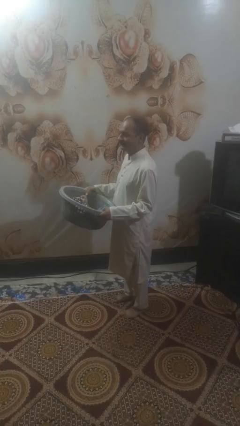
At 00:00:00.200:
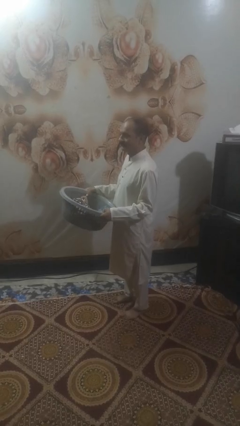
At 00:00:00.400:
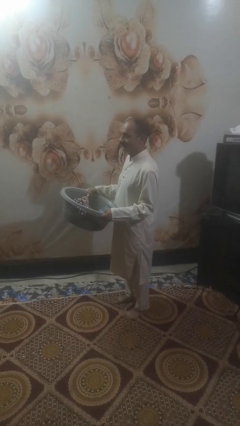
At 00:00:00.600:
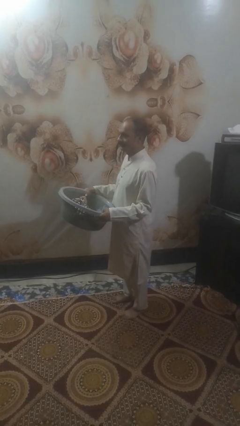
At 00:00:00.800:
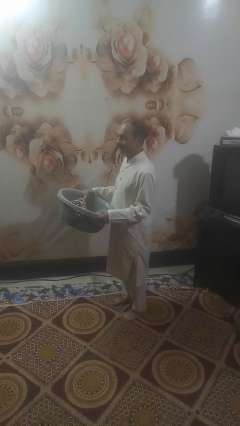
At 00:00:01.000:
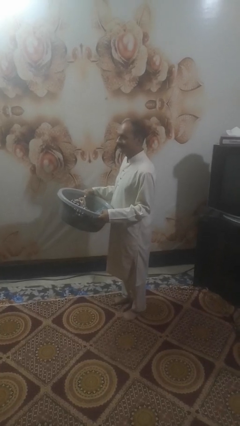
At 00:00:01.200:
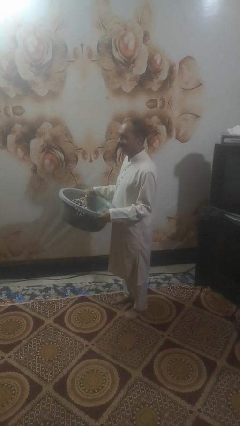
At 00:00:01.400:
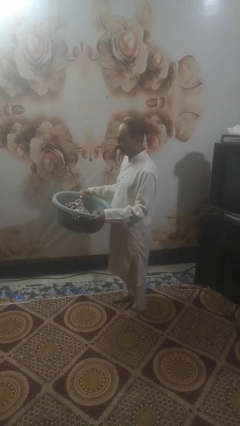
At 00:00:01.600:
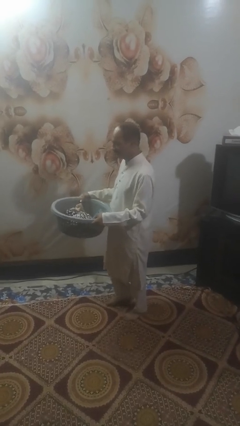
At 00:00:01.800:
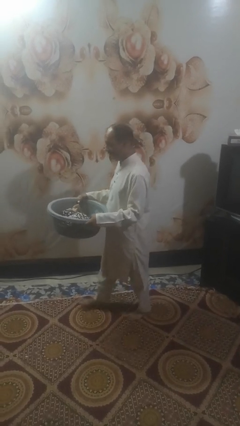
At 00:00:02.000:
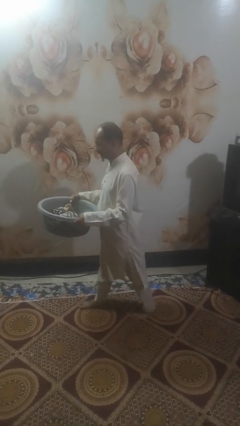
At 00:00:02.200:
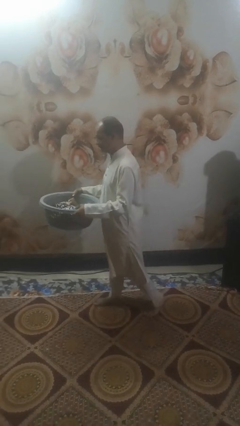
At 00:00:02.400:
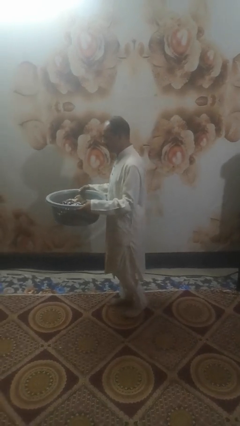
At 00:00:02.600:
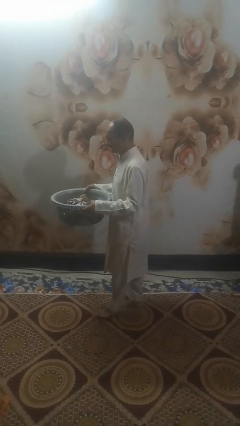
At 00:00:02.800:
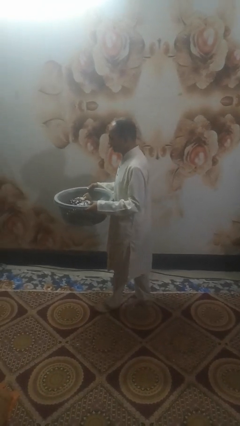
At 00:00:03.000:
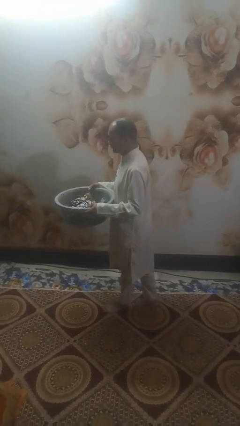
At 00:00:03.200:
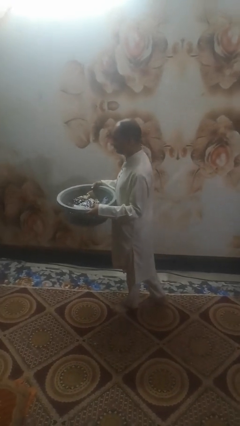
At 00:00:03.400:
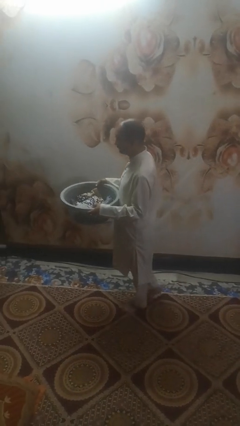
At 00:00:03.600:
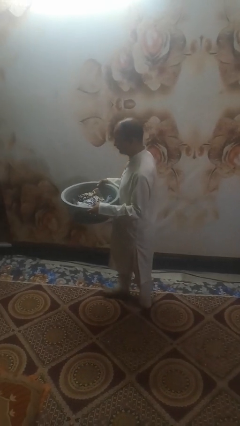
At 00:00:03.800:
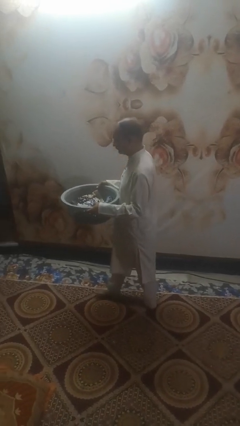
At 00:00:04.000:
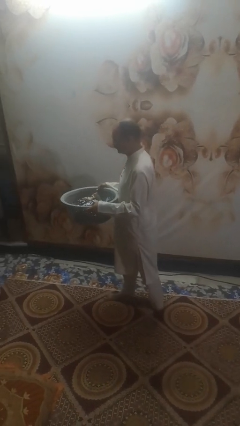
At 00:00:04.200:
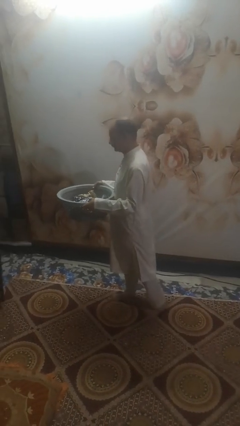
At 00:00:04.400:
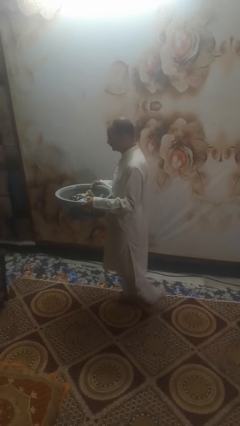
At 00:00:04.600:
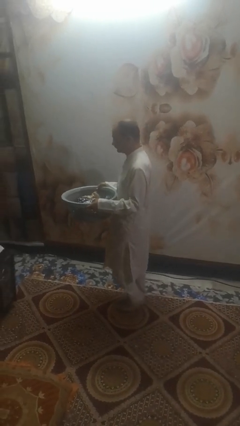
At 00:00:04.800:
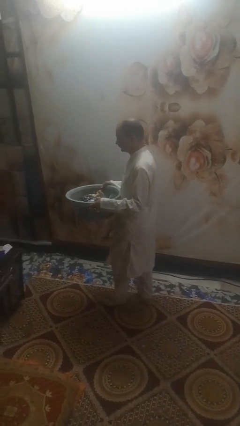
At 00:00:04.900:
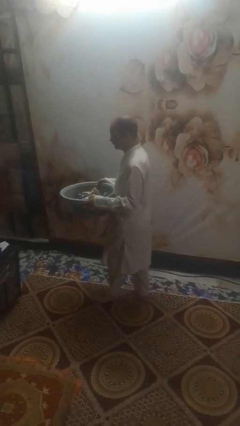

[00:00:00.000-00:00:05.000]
person carries laundry basket

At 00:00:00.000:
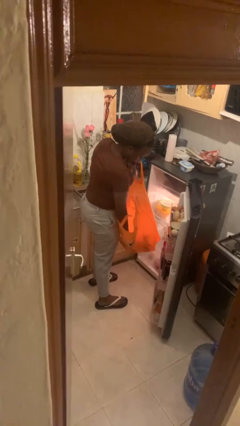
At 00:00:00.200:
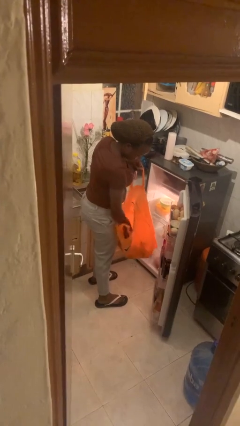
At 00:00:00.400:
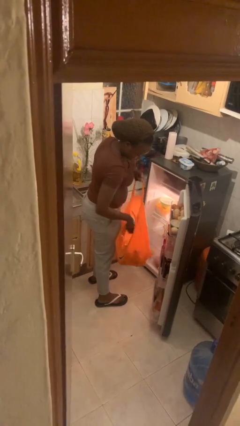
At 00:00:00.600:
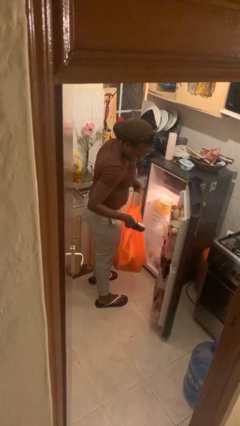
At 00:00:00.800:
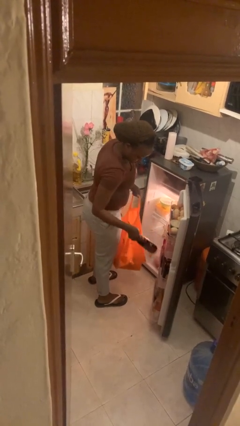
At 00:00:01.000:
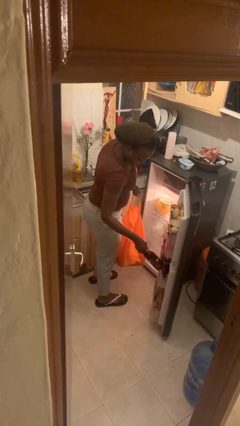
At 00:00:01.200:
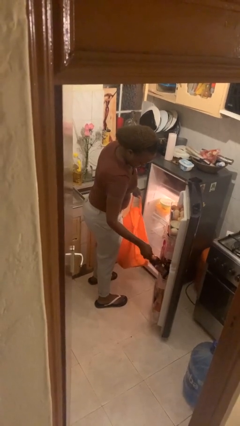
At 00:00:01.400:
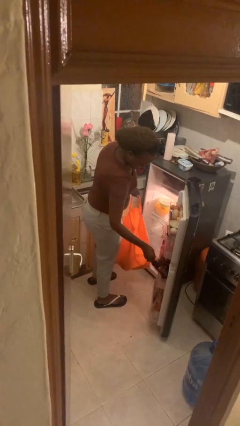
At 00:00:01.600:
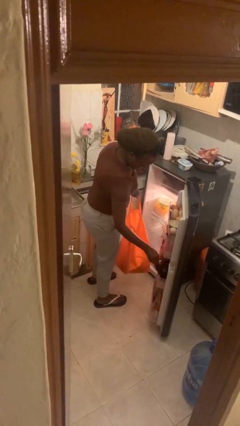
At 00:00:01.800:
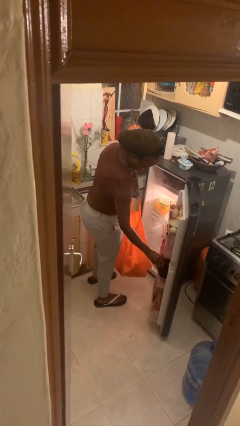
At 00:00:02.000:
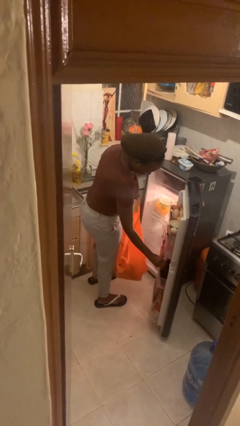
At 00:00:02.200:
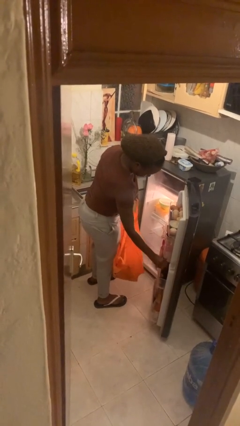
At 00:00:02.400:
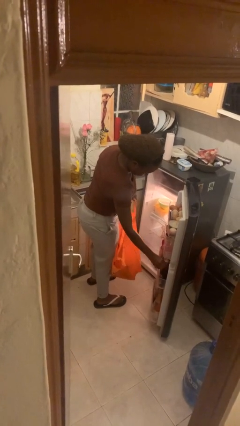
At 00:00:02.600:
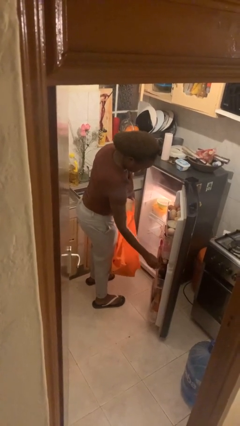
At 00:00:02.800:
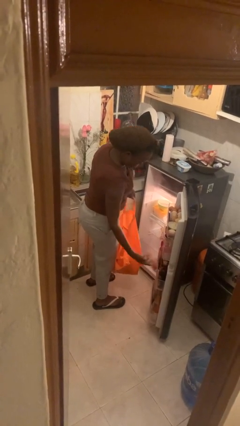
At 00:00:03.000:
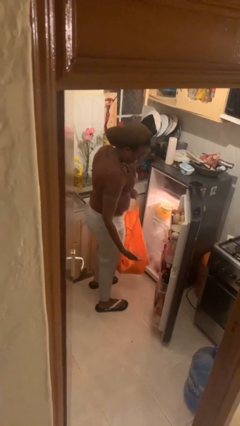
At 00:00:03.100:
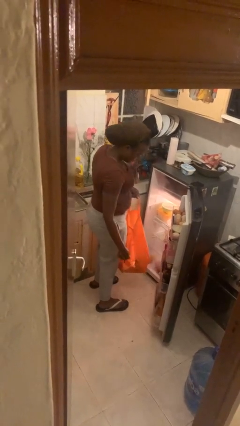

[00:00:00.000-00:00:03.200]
person loads groceries into refrigerator

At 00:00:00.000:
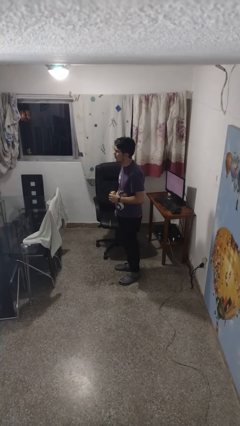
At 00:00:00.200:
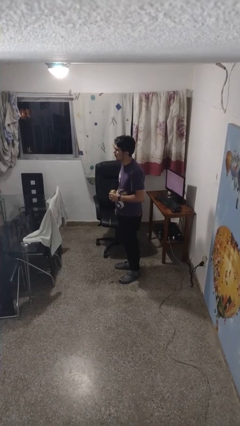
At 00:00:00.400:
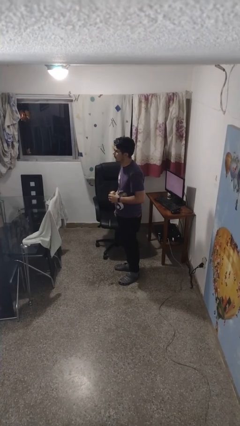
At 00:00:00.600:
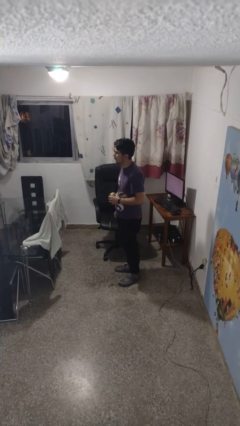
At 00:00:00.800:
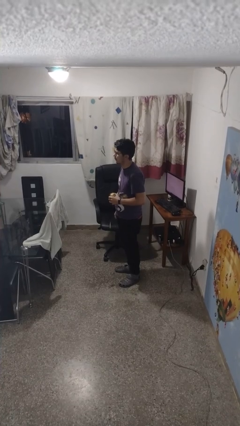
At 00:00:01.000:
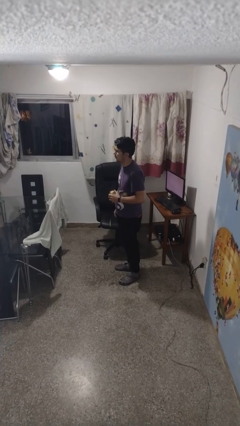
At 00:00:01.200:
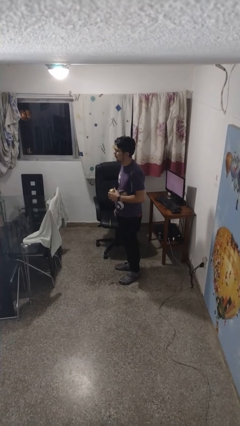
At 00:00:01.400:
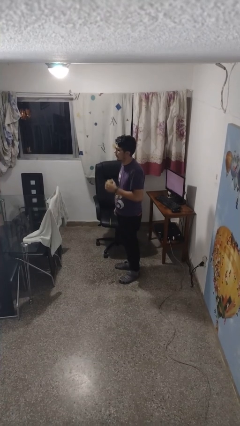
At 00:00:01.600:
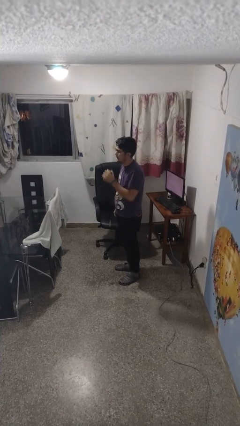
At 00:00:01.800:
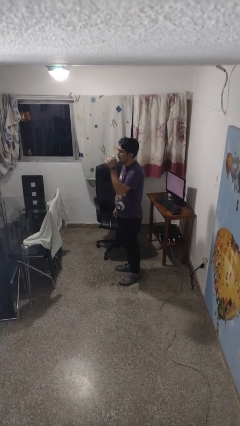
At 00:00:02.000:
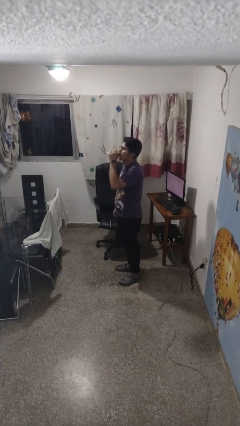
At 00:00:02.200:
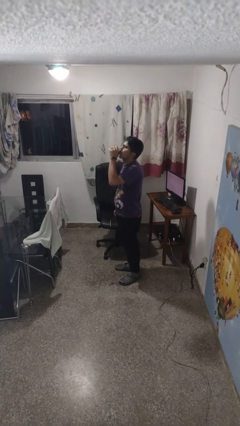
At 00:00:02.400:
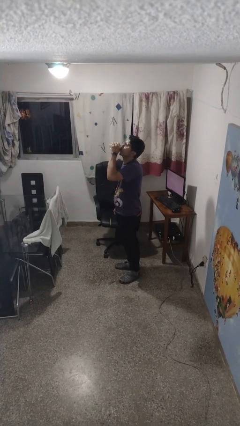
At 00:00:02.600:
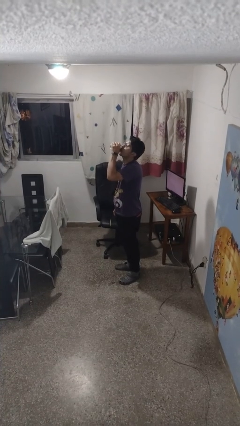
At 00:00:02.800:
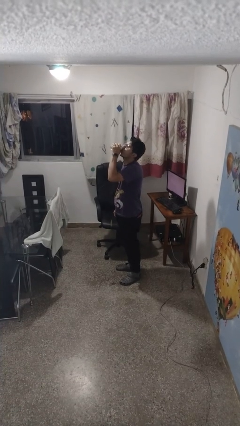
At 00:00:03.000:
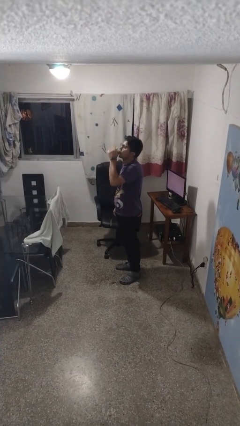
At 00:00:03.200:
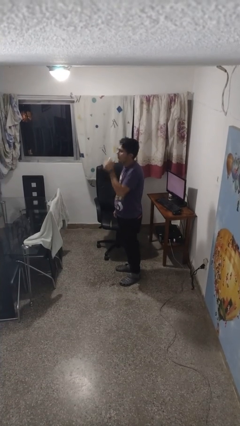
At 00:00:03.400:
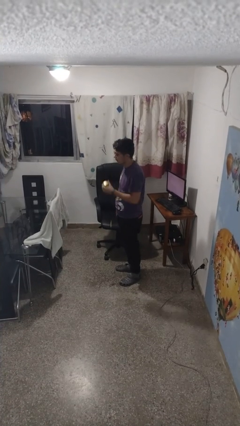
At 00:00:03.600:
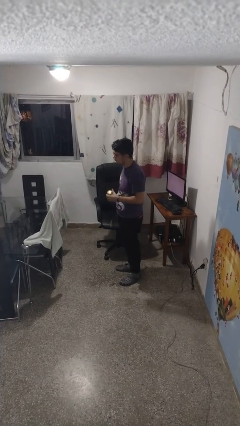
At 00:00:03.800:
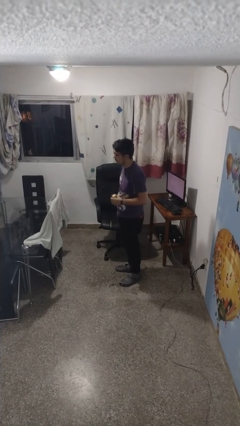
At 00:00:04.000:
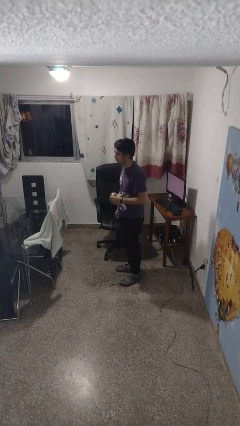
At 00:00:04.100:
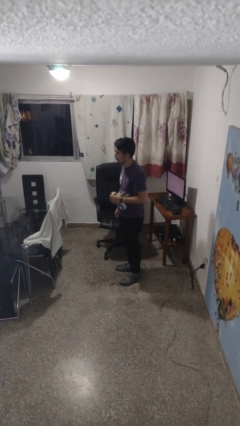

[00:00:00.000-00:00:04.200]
person drinks from beverage can

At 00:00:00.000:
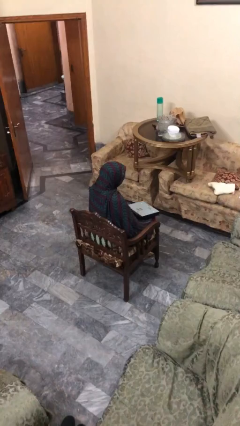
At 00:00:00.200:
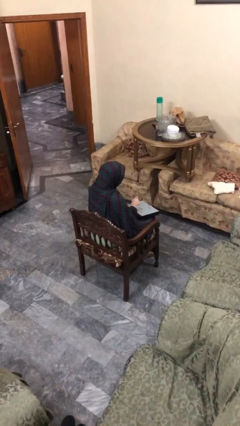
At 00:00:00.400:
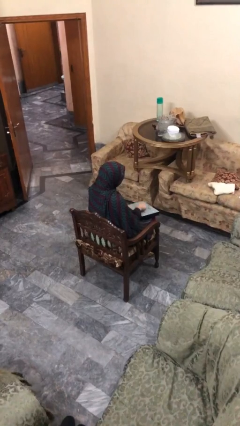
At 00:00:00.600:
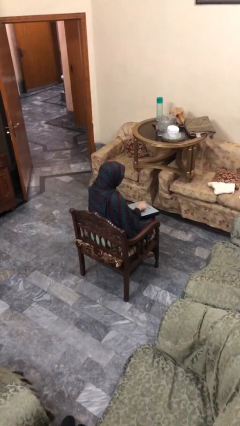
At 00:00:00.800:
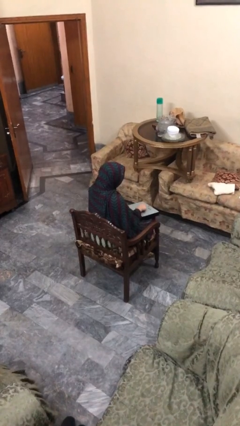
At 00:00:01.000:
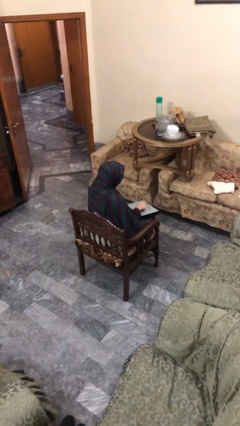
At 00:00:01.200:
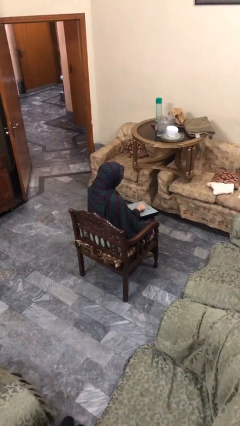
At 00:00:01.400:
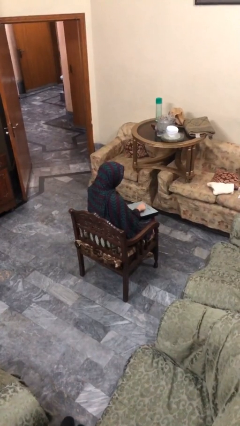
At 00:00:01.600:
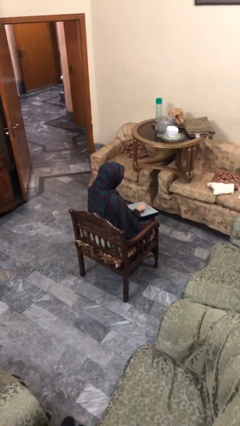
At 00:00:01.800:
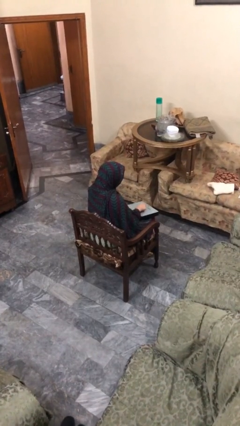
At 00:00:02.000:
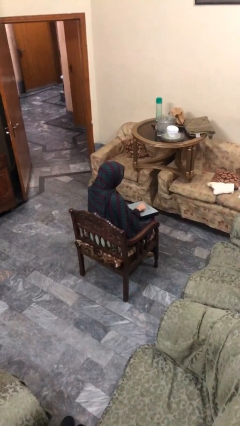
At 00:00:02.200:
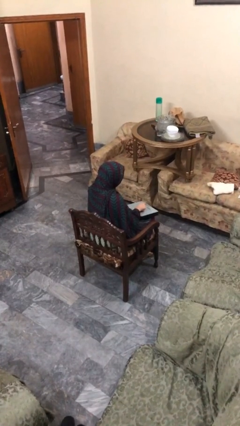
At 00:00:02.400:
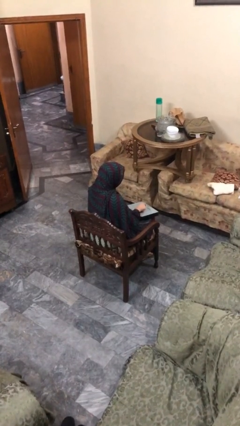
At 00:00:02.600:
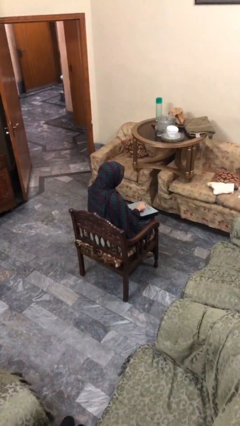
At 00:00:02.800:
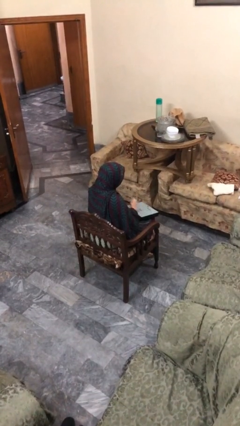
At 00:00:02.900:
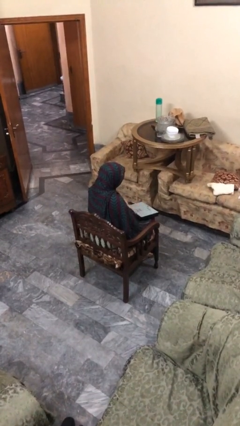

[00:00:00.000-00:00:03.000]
person taps object with finger

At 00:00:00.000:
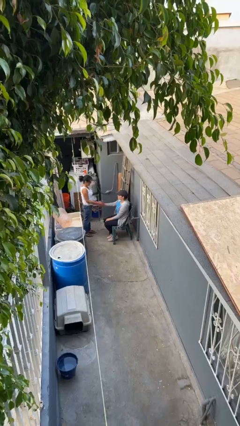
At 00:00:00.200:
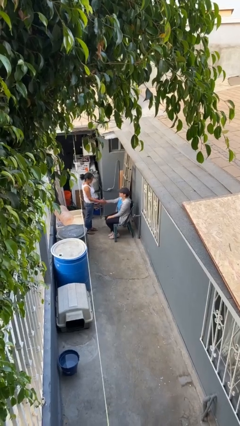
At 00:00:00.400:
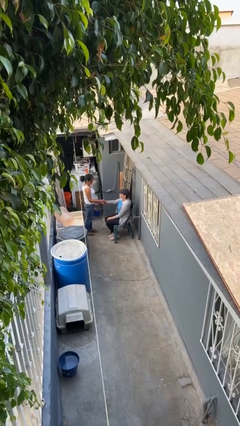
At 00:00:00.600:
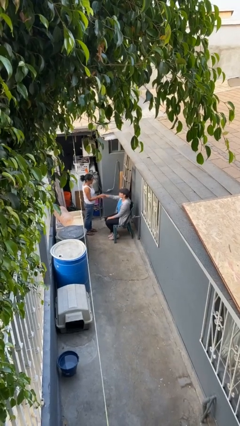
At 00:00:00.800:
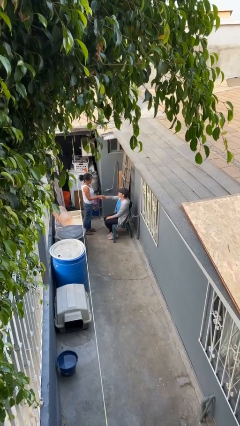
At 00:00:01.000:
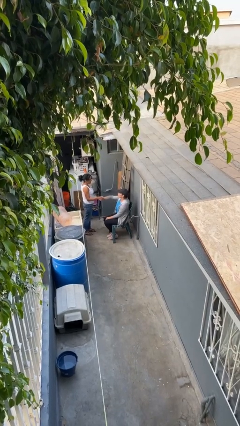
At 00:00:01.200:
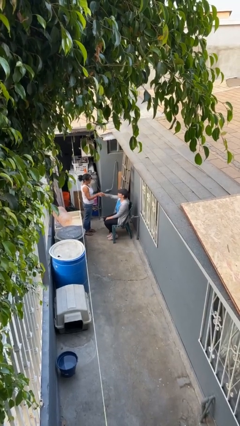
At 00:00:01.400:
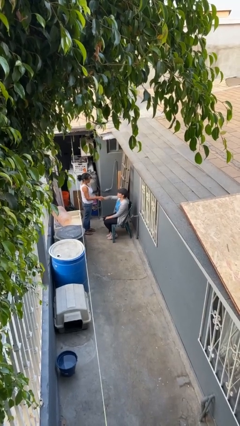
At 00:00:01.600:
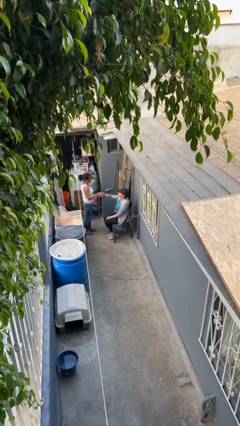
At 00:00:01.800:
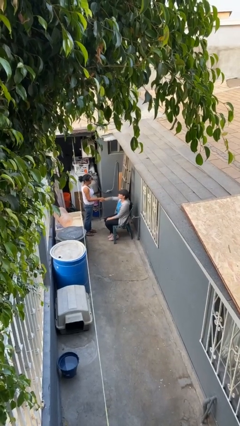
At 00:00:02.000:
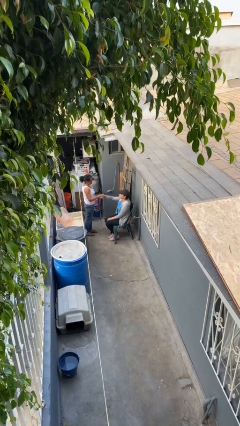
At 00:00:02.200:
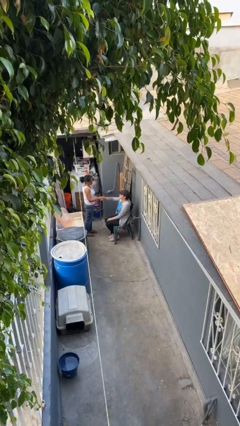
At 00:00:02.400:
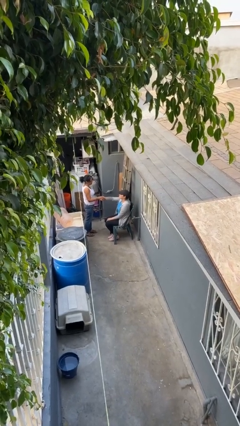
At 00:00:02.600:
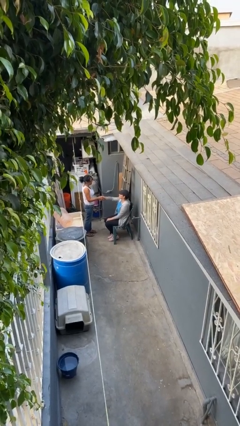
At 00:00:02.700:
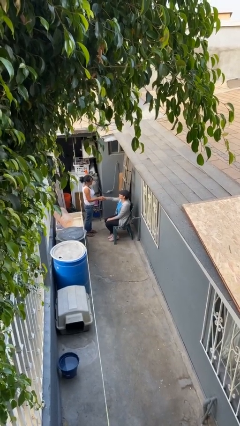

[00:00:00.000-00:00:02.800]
person shakes hand
